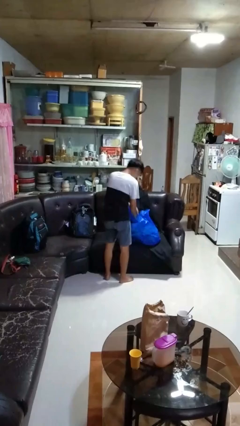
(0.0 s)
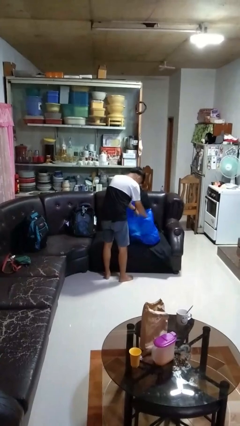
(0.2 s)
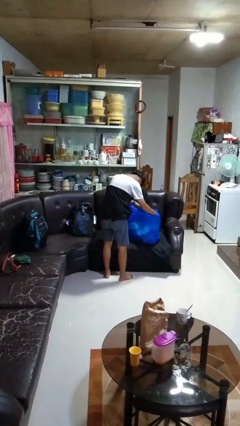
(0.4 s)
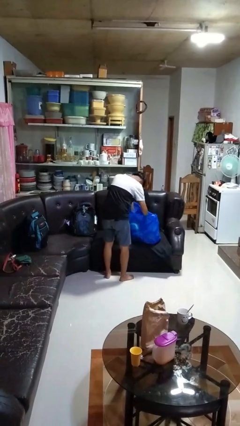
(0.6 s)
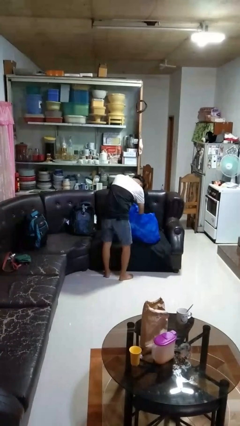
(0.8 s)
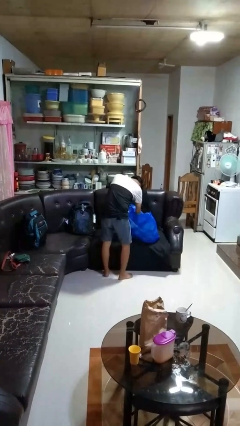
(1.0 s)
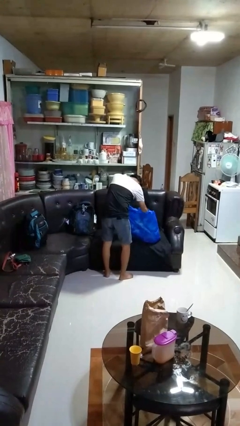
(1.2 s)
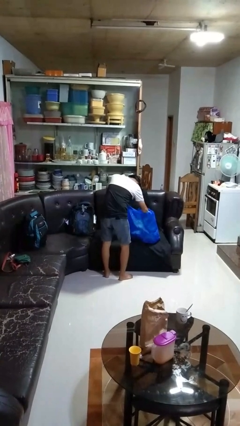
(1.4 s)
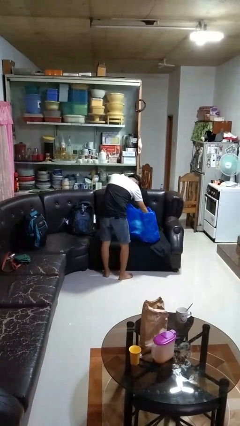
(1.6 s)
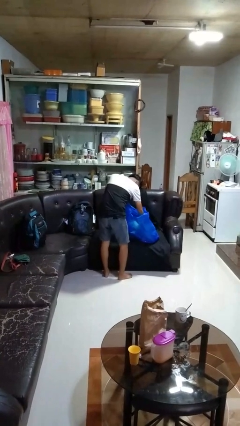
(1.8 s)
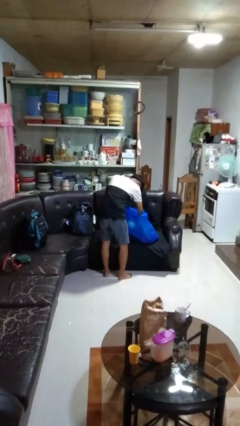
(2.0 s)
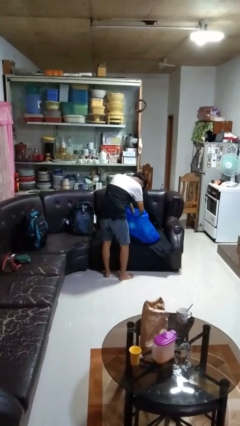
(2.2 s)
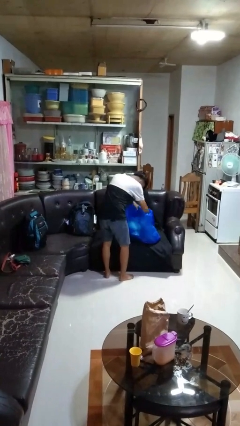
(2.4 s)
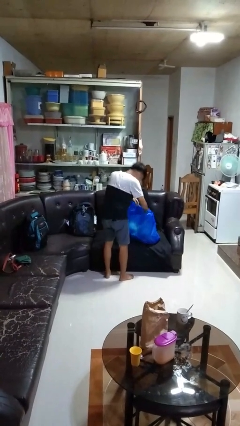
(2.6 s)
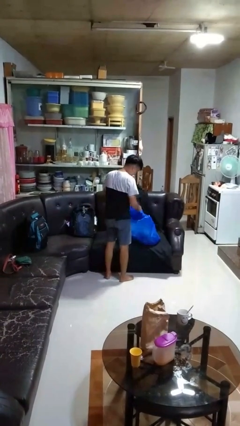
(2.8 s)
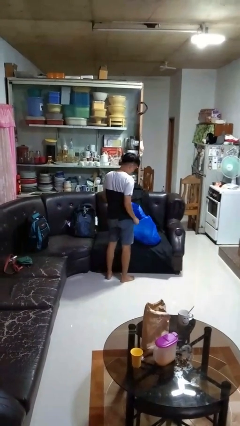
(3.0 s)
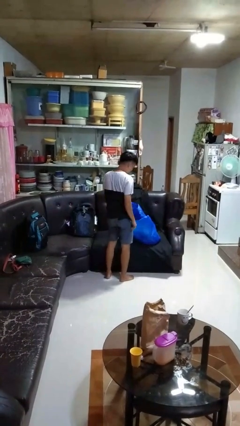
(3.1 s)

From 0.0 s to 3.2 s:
person searches in bag

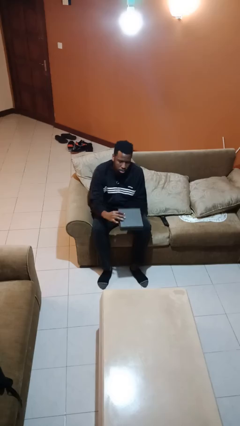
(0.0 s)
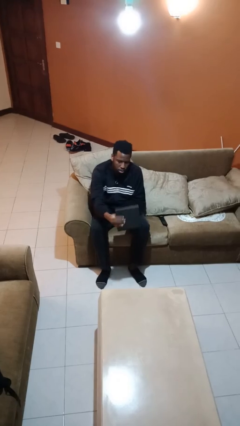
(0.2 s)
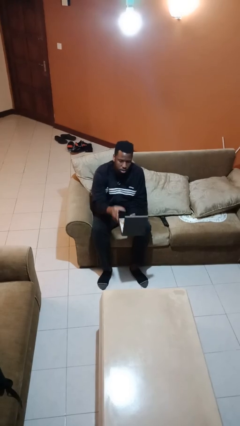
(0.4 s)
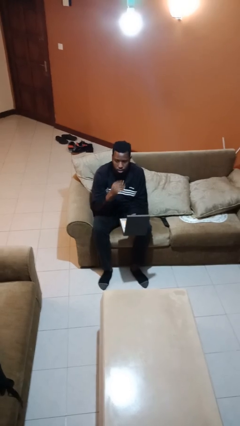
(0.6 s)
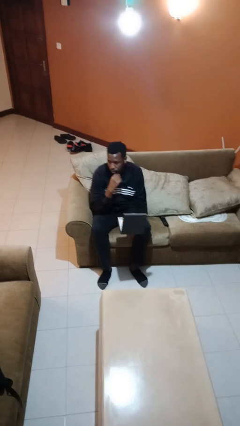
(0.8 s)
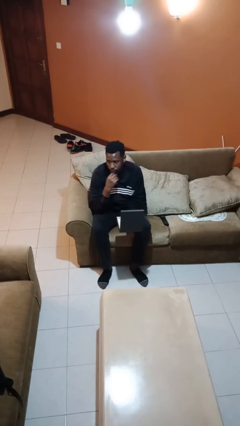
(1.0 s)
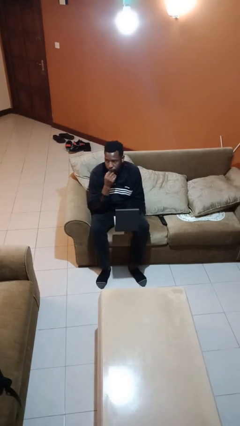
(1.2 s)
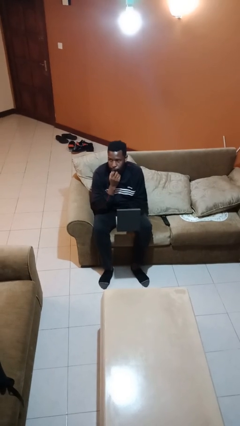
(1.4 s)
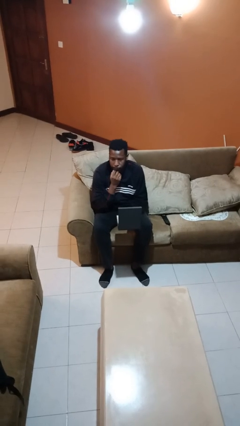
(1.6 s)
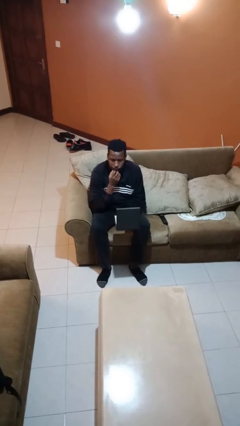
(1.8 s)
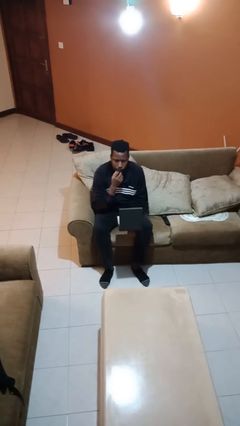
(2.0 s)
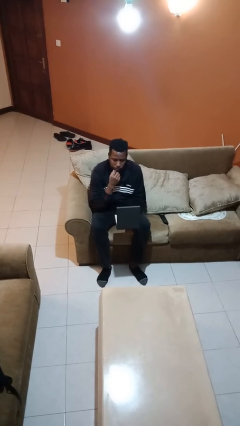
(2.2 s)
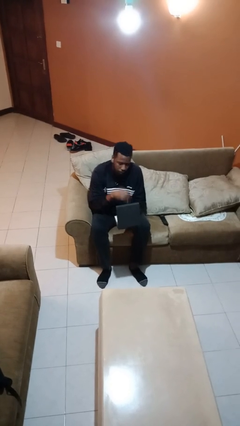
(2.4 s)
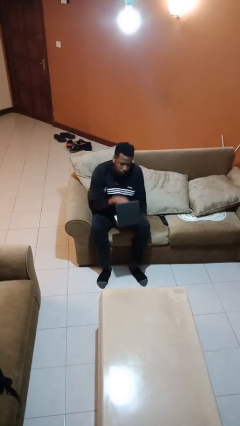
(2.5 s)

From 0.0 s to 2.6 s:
person opens jewelry box

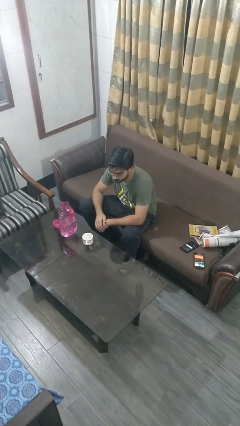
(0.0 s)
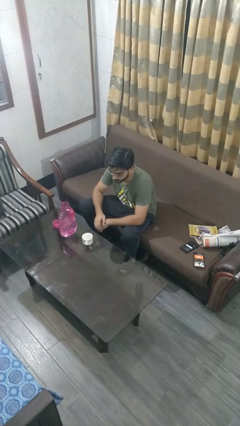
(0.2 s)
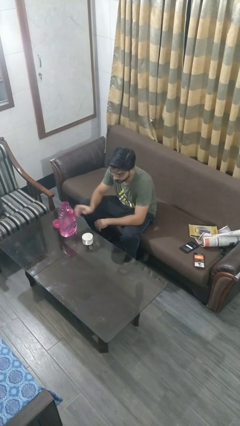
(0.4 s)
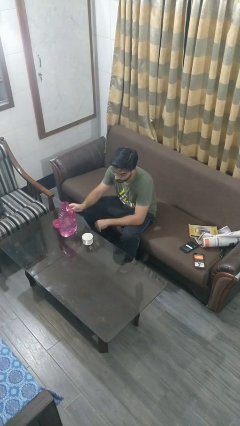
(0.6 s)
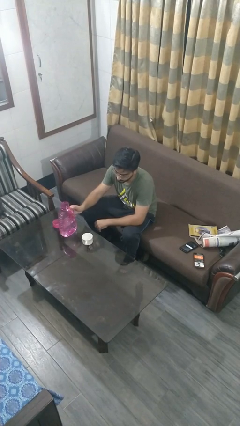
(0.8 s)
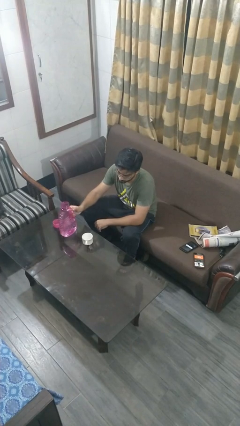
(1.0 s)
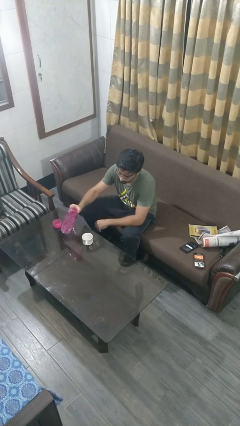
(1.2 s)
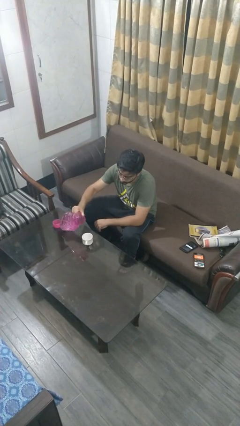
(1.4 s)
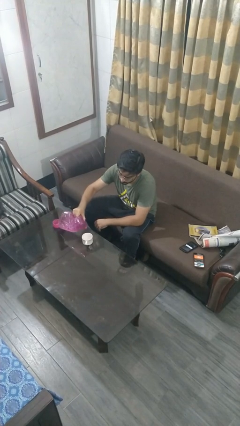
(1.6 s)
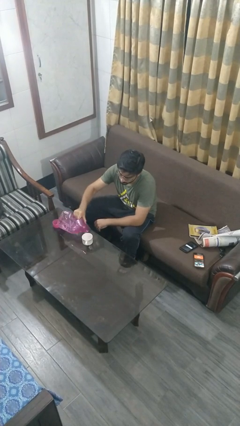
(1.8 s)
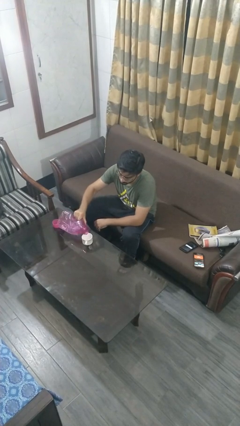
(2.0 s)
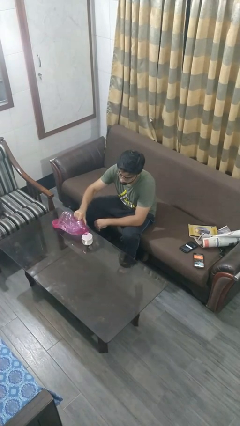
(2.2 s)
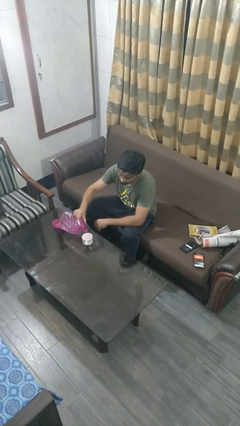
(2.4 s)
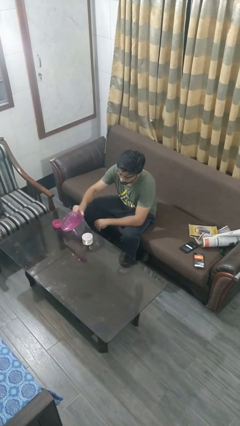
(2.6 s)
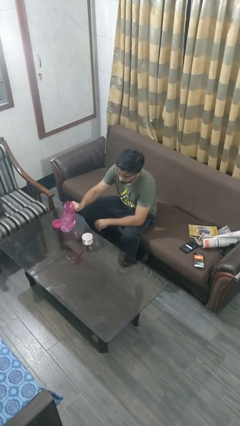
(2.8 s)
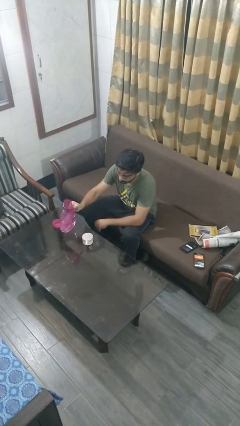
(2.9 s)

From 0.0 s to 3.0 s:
person pours liquid into cup

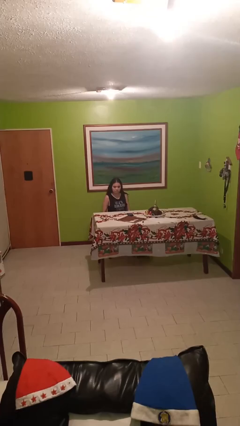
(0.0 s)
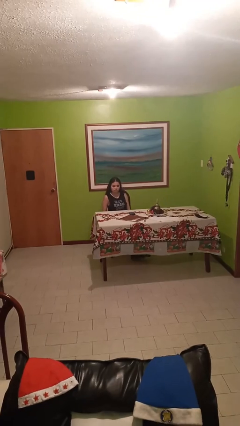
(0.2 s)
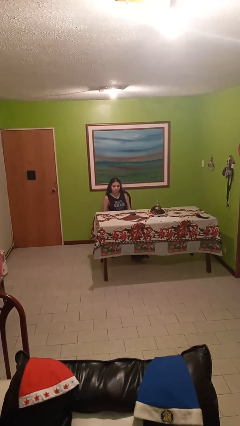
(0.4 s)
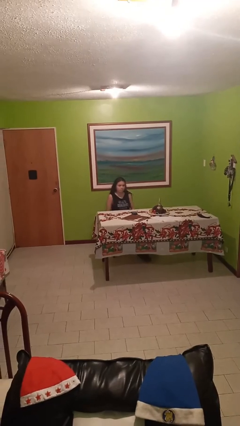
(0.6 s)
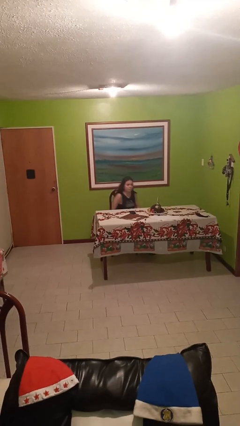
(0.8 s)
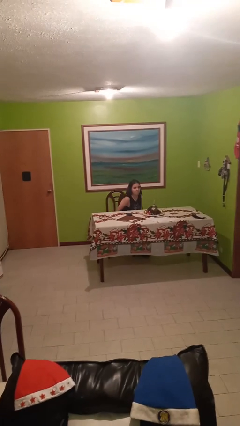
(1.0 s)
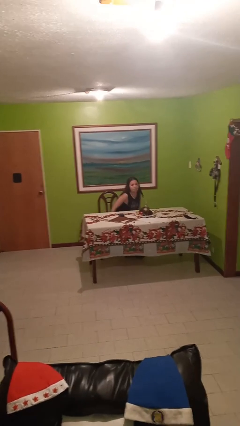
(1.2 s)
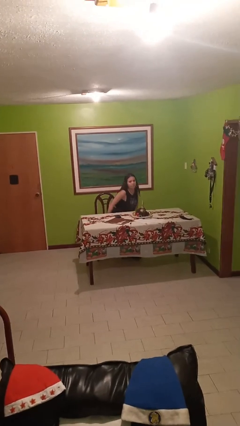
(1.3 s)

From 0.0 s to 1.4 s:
person sits down

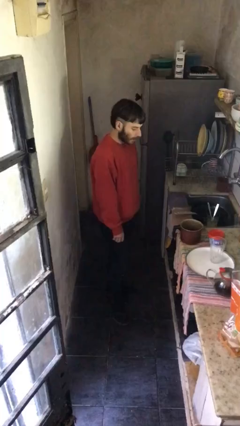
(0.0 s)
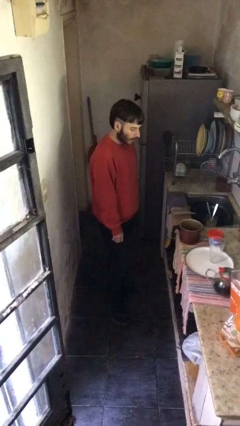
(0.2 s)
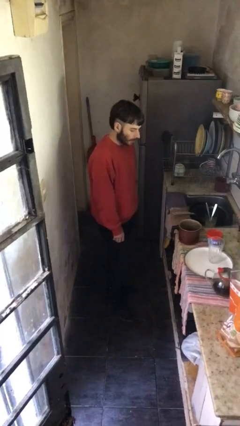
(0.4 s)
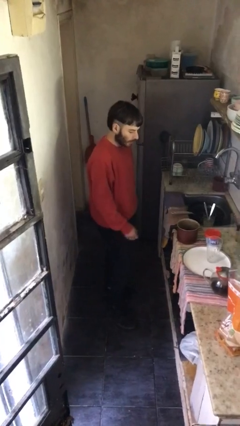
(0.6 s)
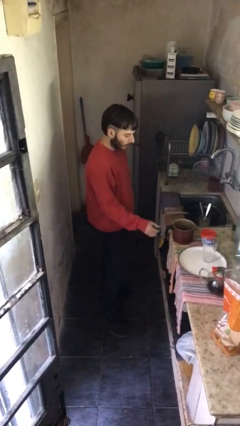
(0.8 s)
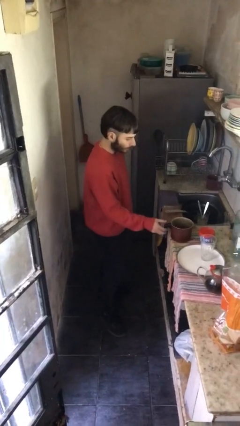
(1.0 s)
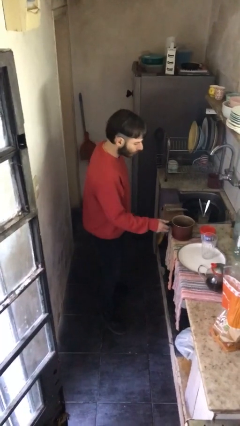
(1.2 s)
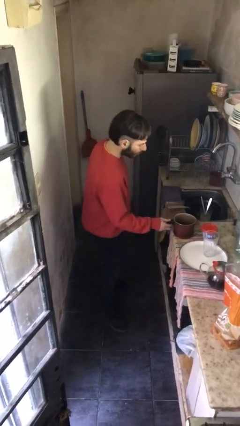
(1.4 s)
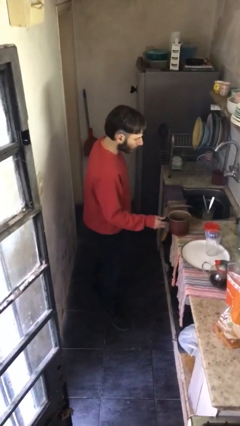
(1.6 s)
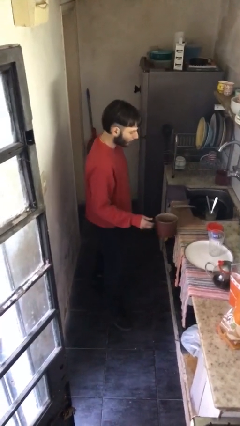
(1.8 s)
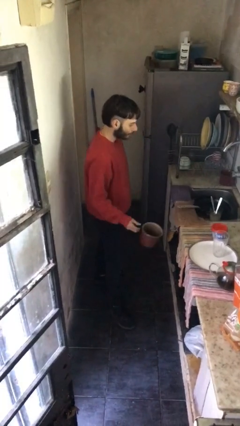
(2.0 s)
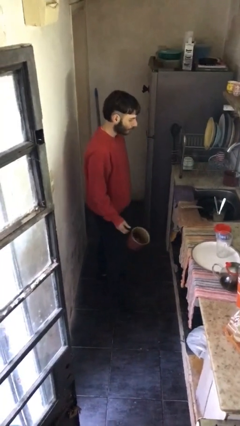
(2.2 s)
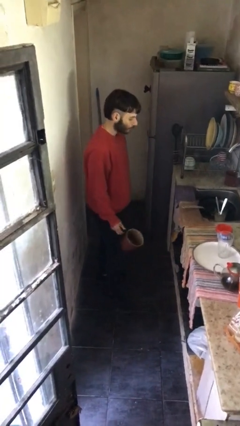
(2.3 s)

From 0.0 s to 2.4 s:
person picks up object from countertop

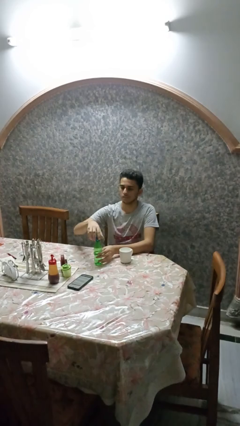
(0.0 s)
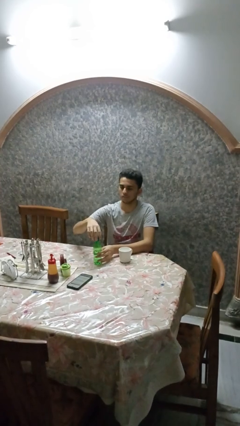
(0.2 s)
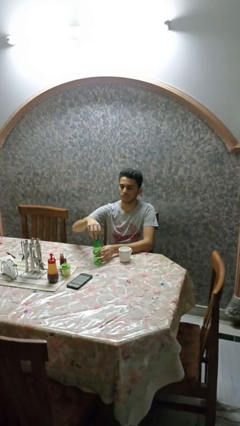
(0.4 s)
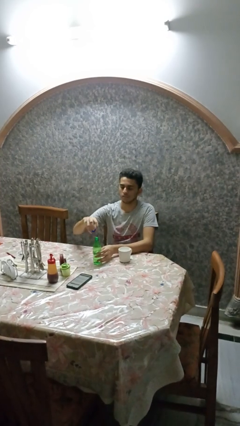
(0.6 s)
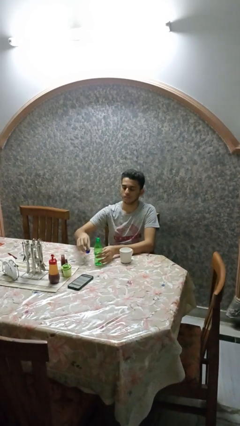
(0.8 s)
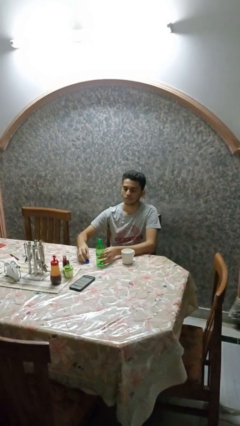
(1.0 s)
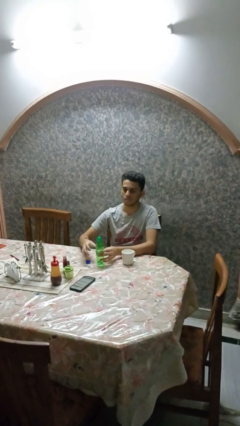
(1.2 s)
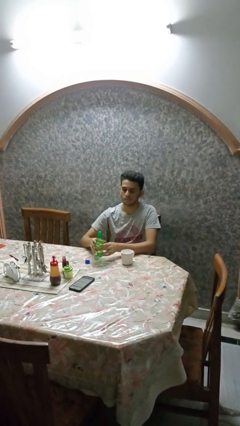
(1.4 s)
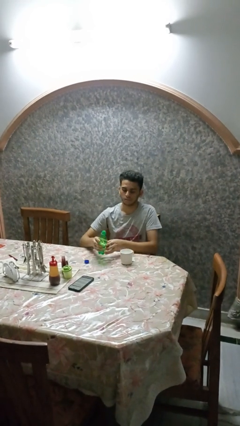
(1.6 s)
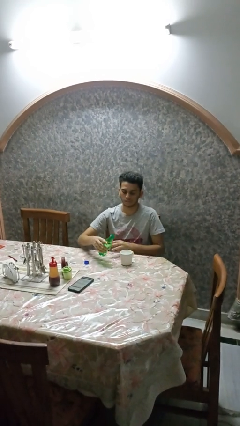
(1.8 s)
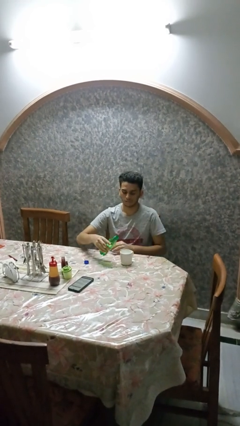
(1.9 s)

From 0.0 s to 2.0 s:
person unscrews lid from bottle

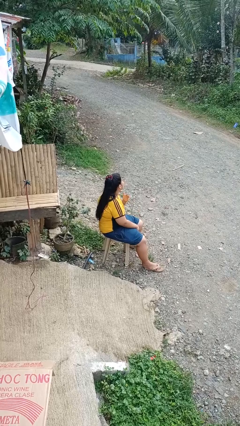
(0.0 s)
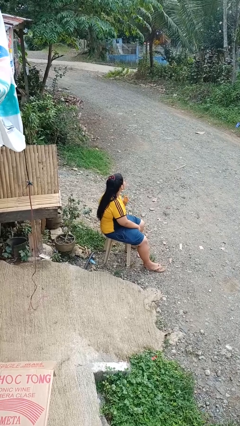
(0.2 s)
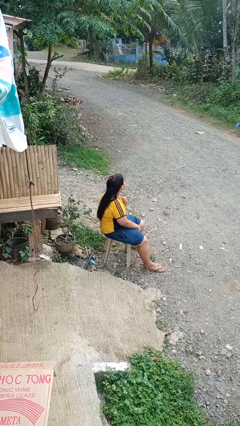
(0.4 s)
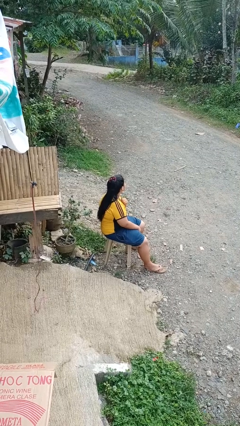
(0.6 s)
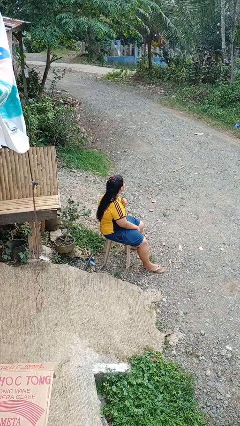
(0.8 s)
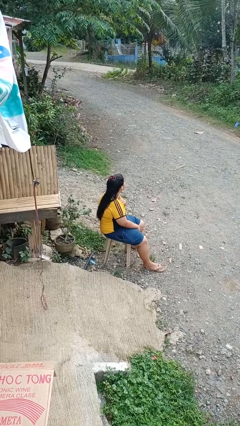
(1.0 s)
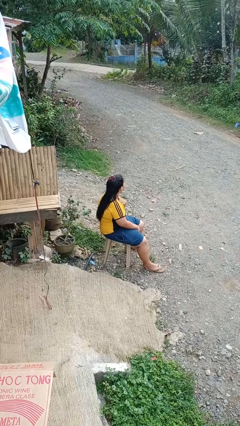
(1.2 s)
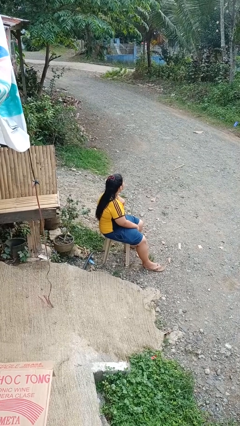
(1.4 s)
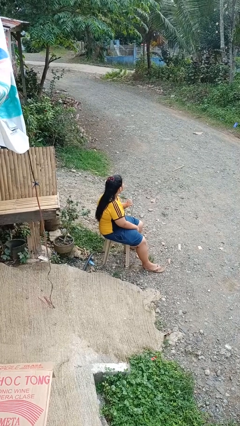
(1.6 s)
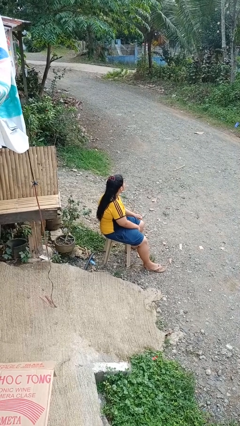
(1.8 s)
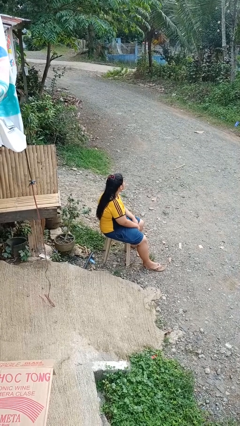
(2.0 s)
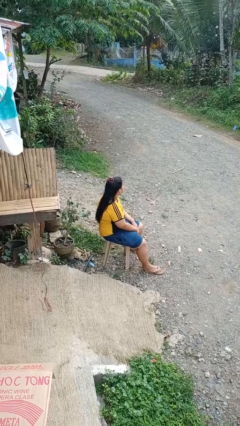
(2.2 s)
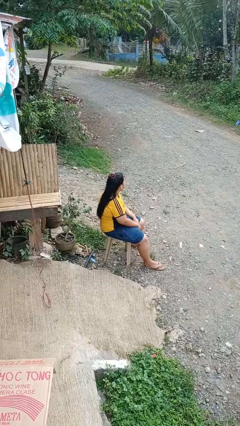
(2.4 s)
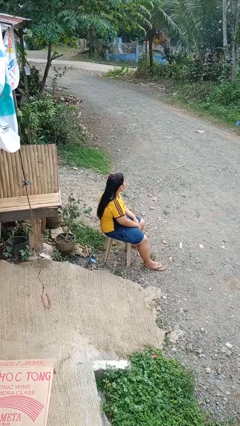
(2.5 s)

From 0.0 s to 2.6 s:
person drums on chest
